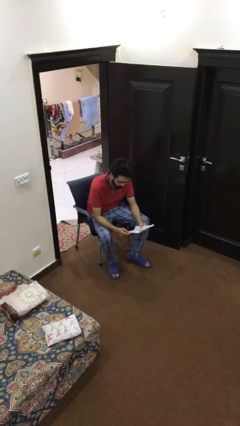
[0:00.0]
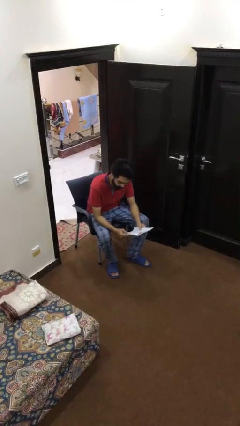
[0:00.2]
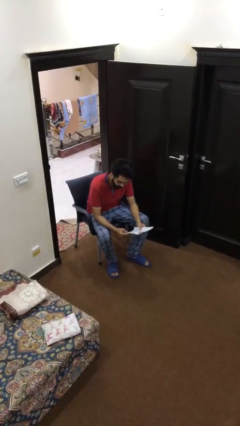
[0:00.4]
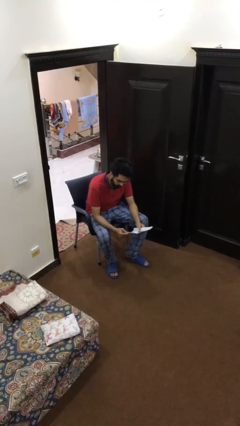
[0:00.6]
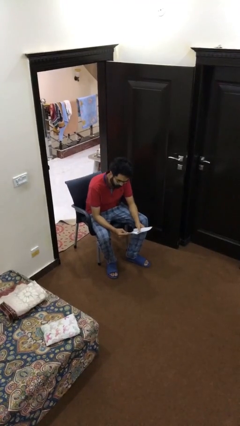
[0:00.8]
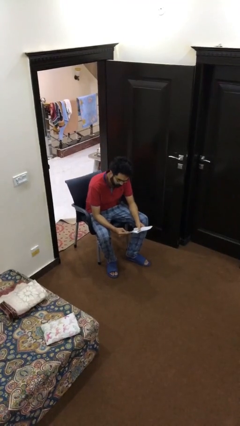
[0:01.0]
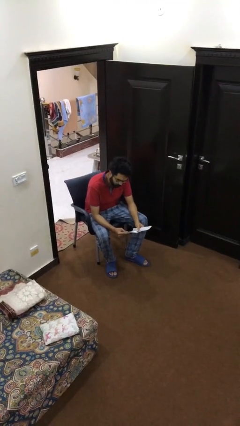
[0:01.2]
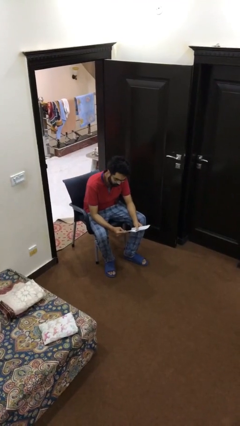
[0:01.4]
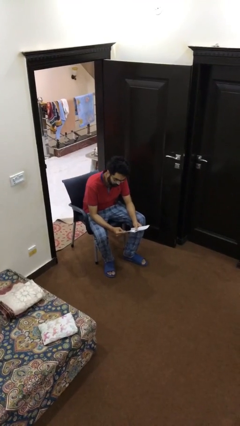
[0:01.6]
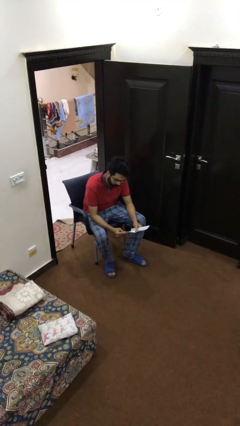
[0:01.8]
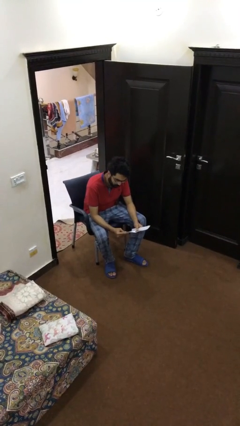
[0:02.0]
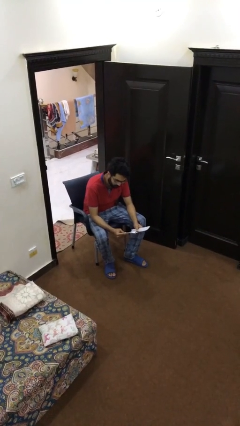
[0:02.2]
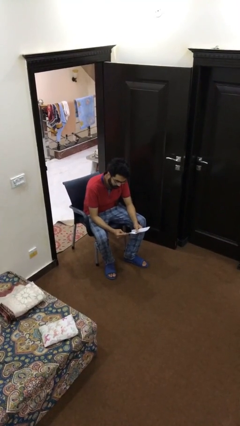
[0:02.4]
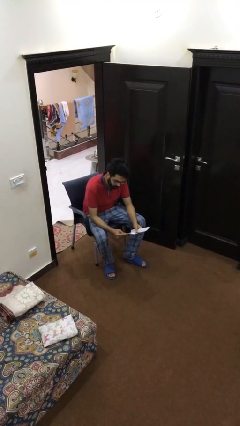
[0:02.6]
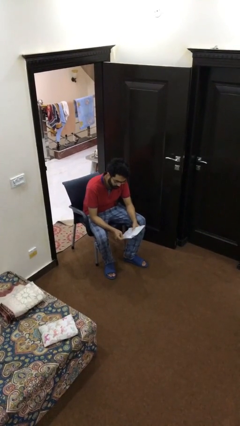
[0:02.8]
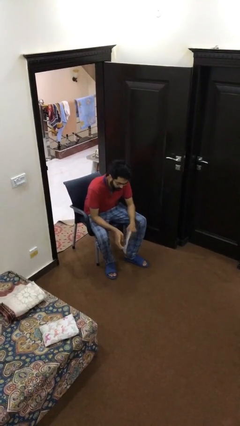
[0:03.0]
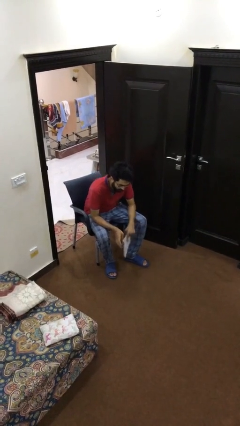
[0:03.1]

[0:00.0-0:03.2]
person reads document

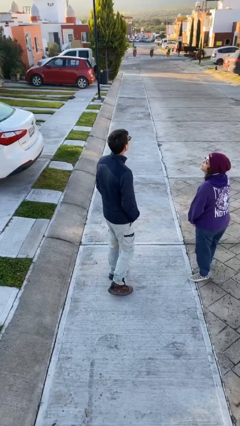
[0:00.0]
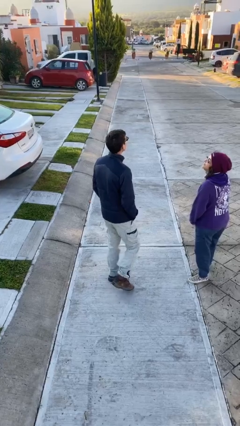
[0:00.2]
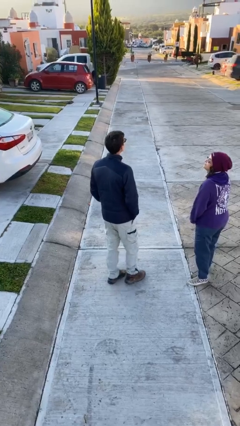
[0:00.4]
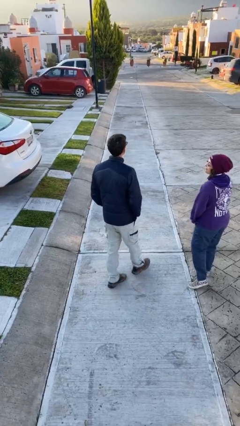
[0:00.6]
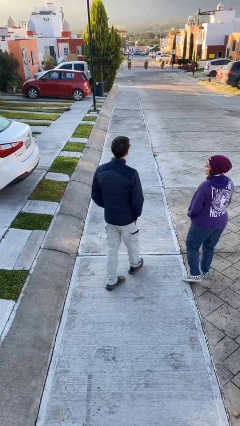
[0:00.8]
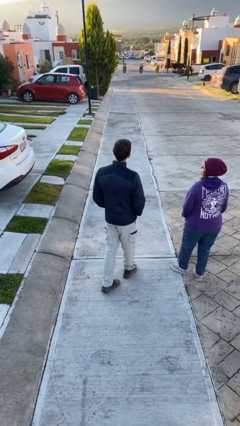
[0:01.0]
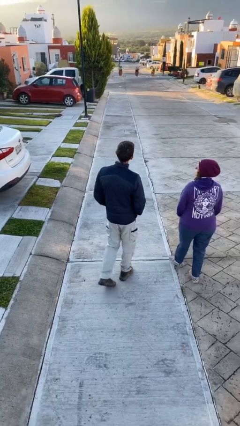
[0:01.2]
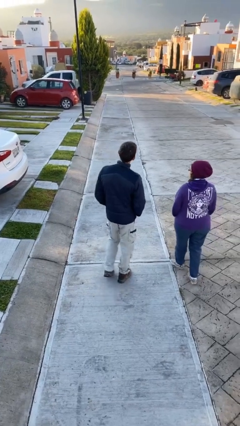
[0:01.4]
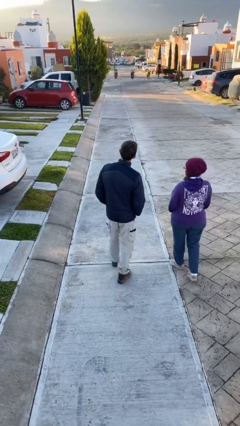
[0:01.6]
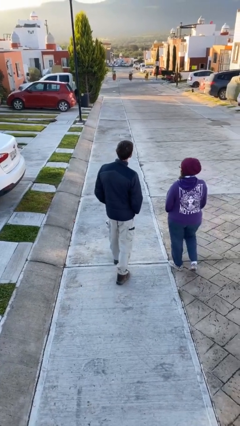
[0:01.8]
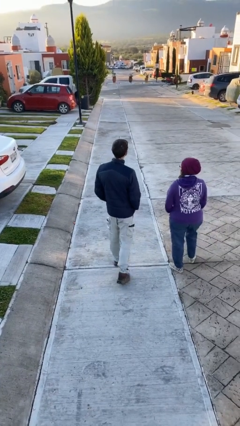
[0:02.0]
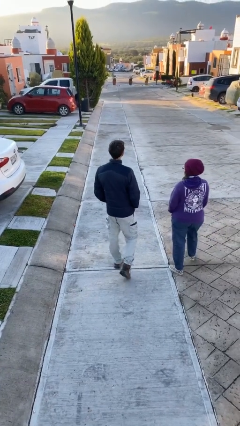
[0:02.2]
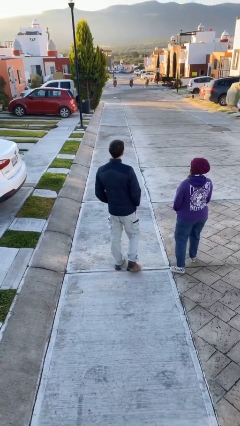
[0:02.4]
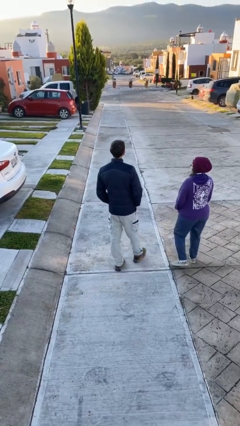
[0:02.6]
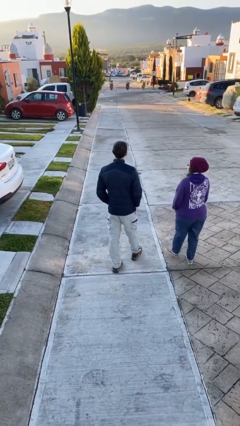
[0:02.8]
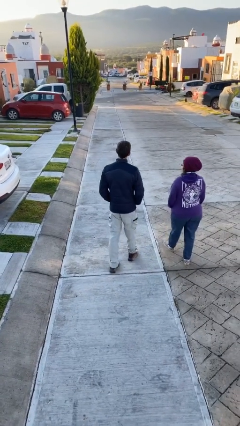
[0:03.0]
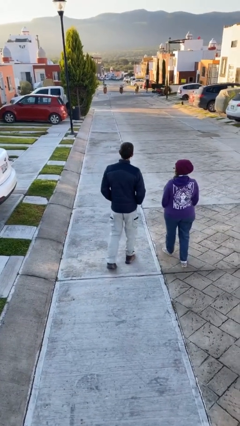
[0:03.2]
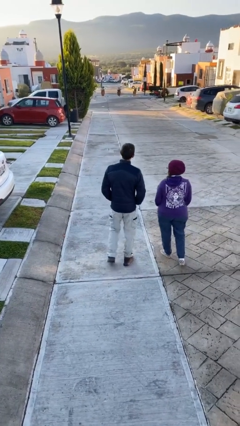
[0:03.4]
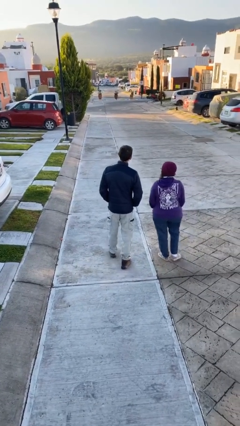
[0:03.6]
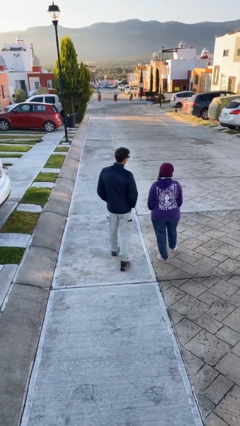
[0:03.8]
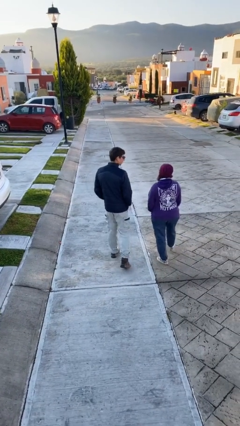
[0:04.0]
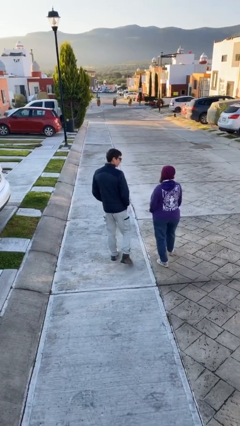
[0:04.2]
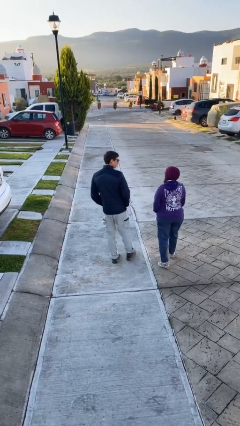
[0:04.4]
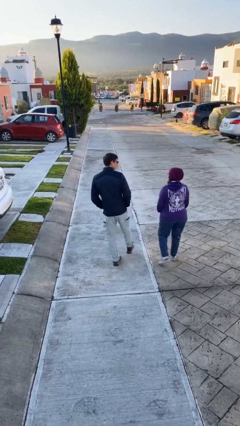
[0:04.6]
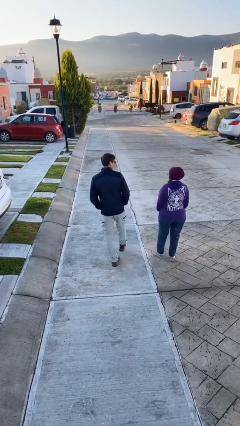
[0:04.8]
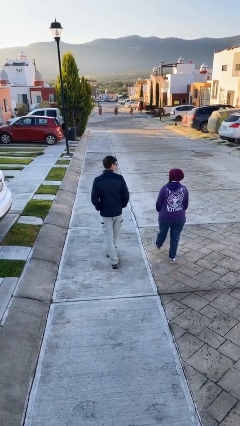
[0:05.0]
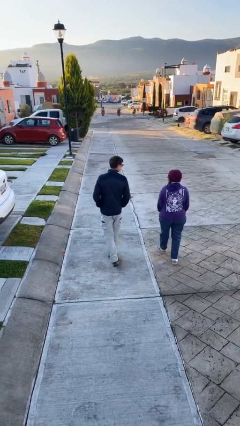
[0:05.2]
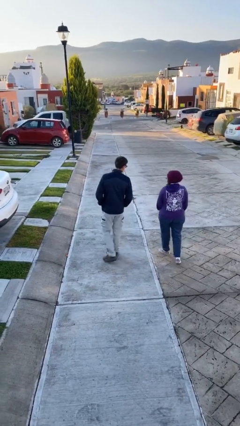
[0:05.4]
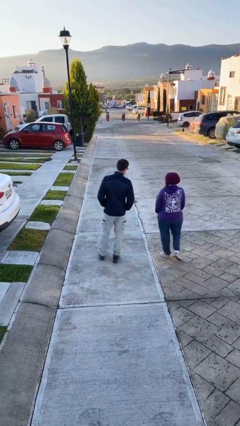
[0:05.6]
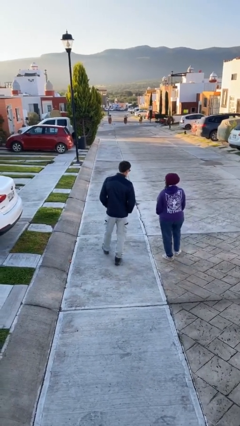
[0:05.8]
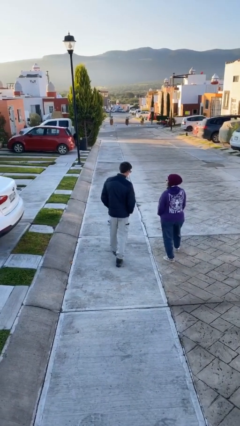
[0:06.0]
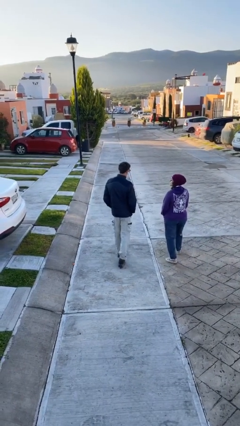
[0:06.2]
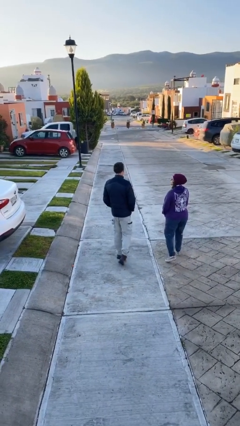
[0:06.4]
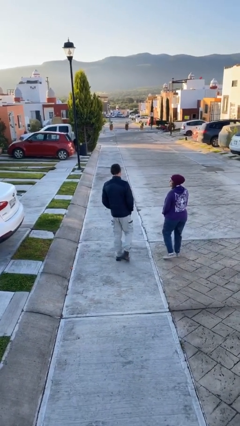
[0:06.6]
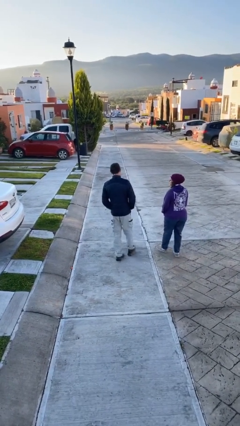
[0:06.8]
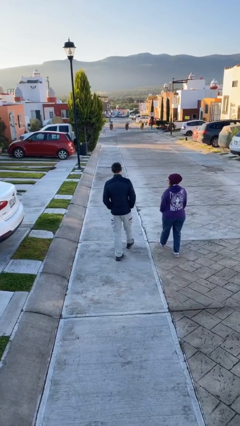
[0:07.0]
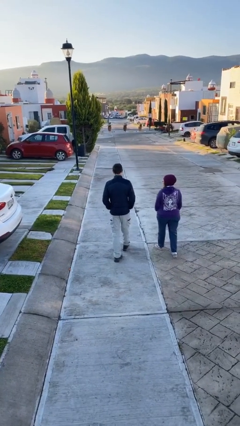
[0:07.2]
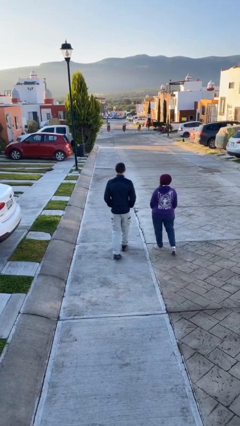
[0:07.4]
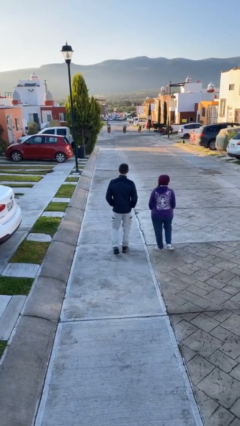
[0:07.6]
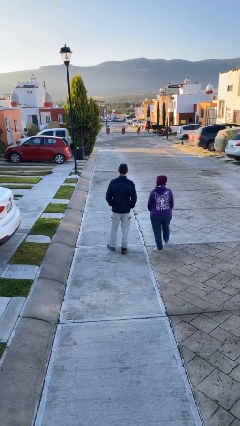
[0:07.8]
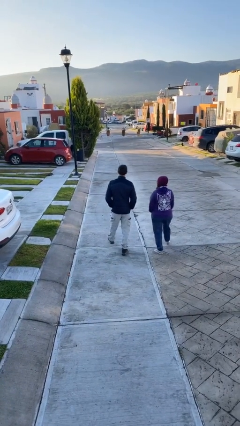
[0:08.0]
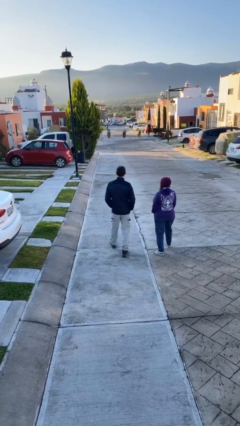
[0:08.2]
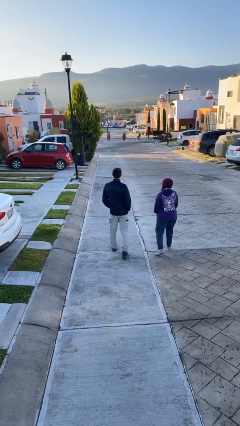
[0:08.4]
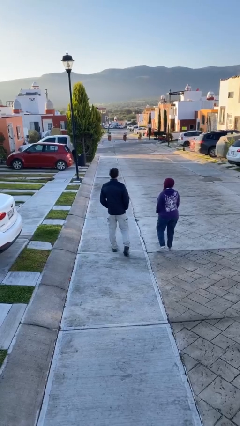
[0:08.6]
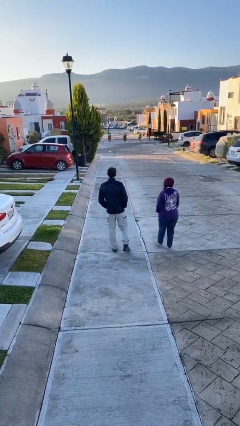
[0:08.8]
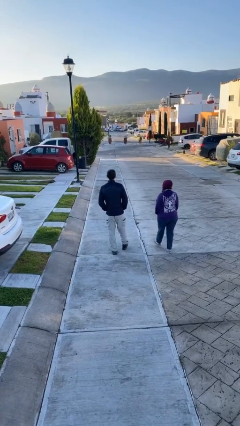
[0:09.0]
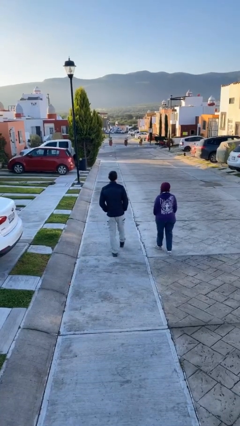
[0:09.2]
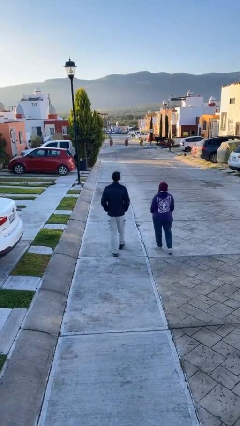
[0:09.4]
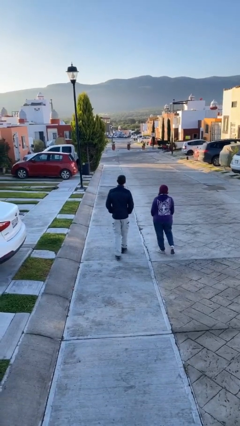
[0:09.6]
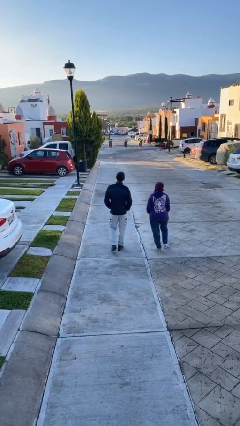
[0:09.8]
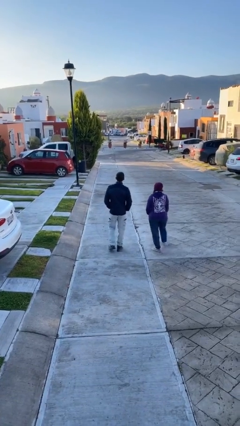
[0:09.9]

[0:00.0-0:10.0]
person talks to person

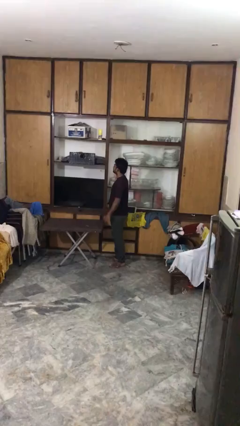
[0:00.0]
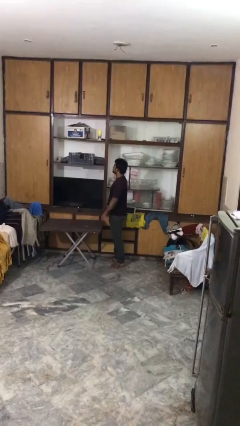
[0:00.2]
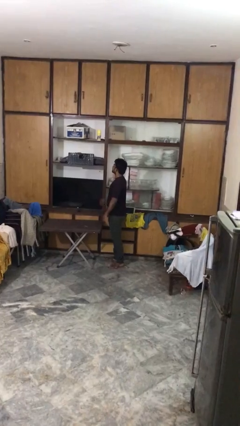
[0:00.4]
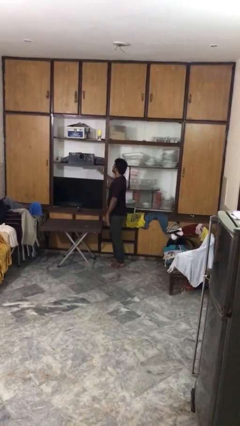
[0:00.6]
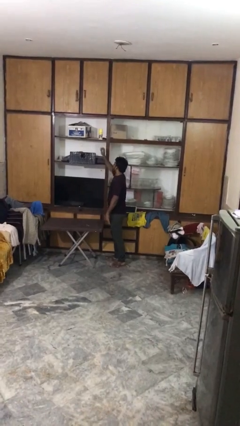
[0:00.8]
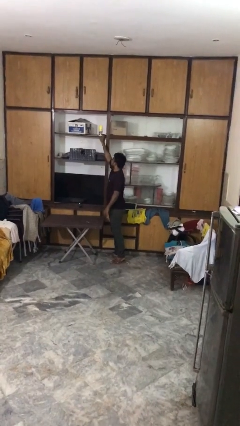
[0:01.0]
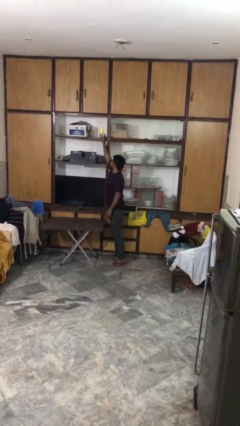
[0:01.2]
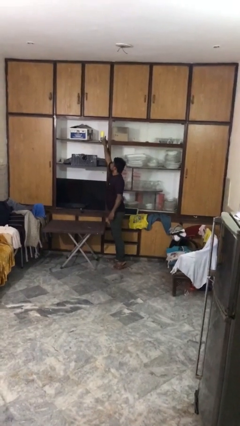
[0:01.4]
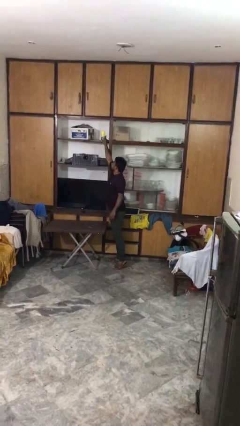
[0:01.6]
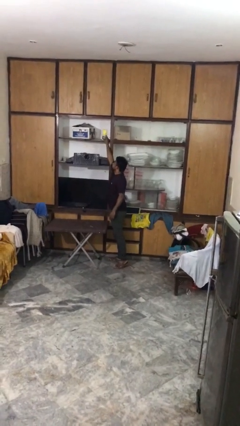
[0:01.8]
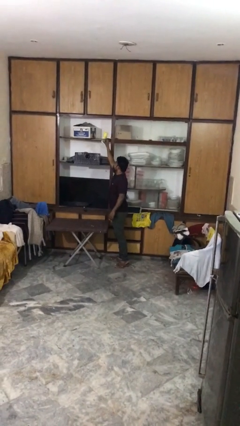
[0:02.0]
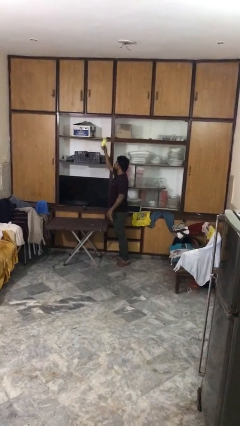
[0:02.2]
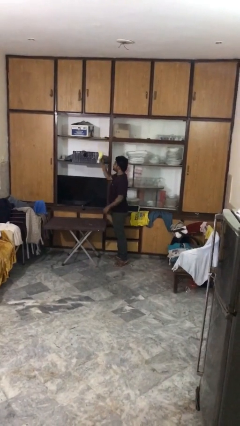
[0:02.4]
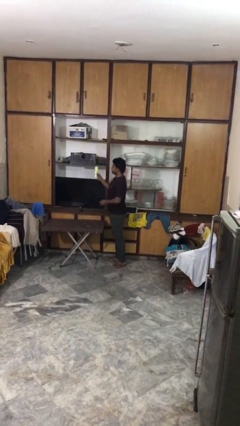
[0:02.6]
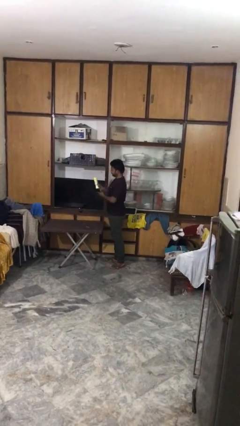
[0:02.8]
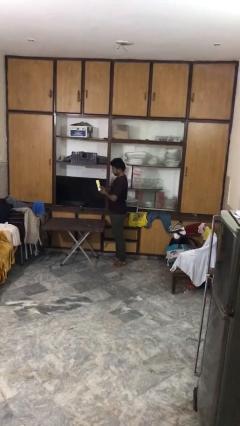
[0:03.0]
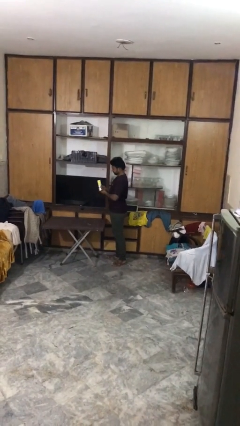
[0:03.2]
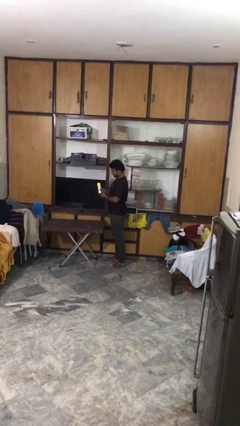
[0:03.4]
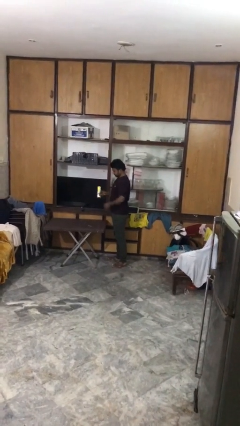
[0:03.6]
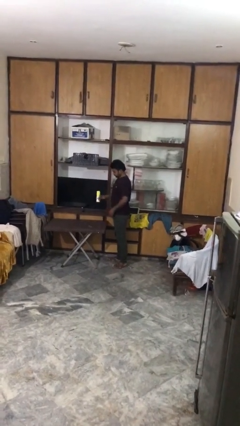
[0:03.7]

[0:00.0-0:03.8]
person picks up object from shelf

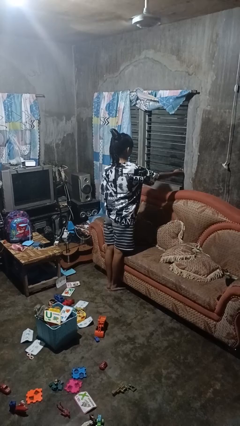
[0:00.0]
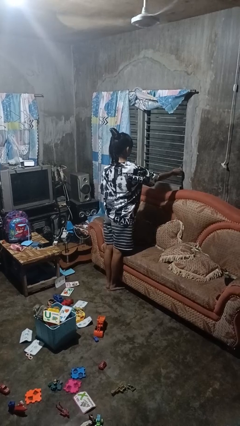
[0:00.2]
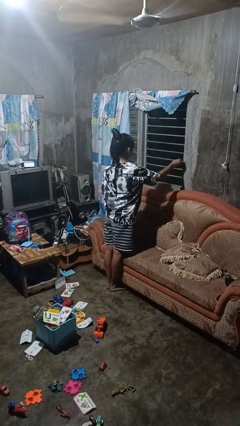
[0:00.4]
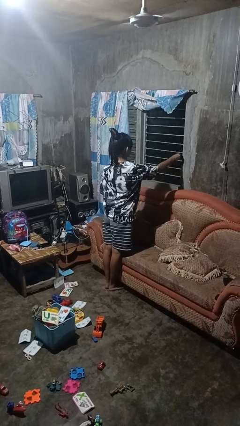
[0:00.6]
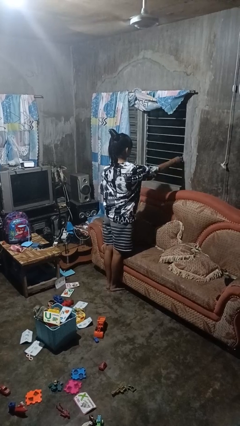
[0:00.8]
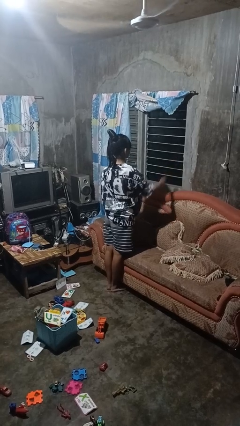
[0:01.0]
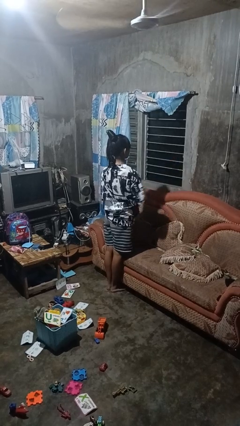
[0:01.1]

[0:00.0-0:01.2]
person closes home window
